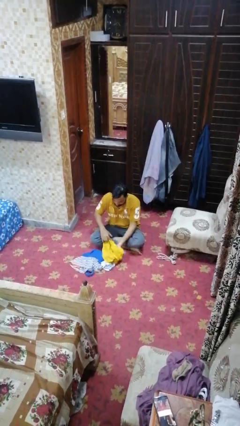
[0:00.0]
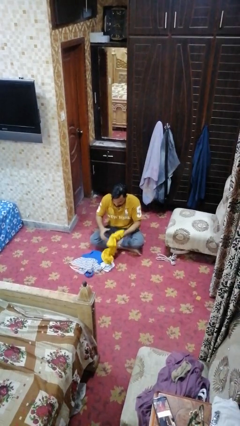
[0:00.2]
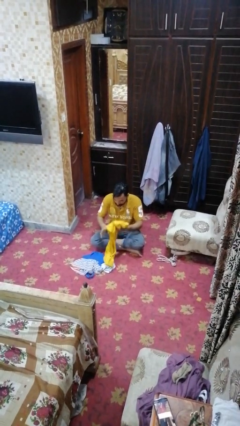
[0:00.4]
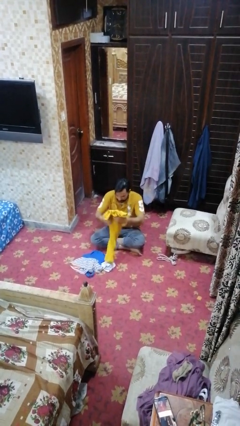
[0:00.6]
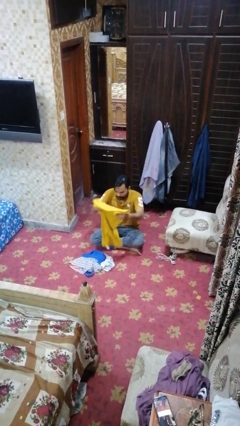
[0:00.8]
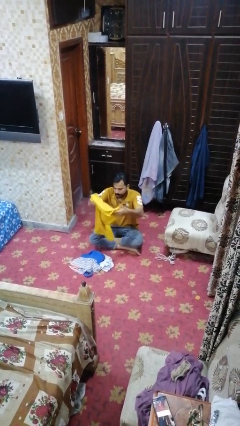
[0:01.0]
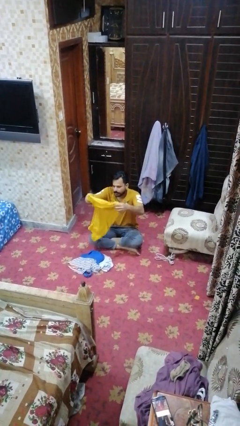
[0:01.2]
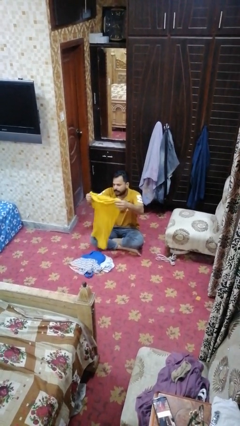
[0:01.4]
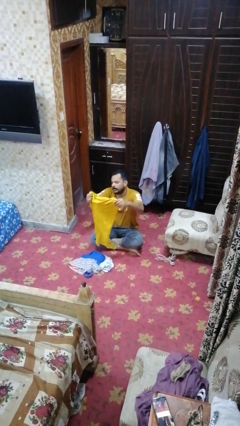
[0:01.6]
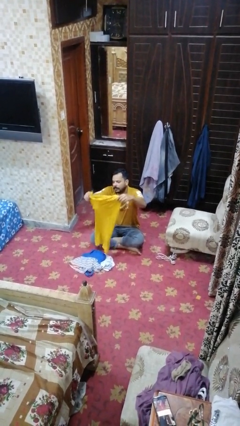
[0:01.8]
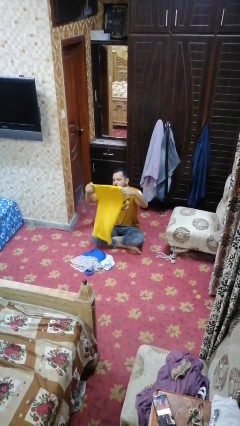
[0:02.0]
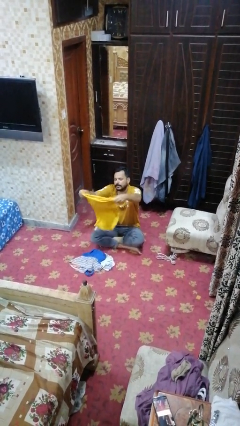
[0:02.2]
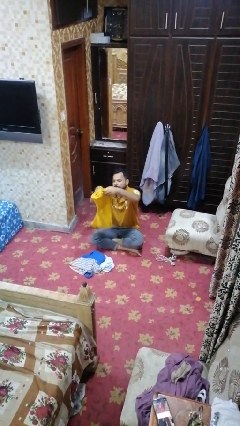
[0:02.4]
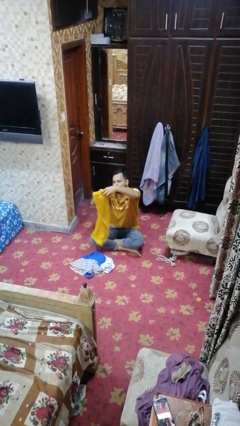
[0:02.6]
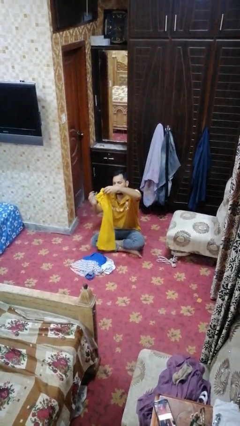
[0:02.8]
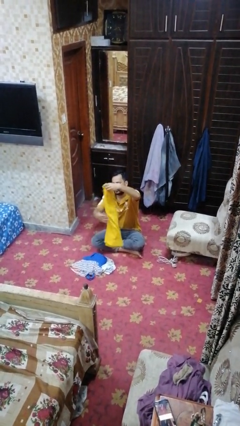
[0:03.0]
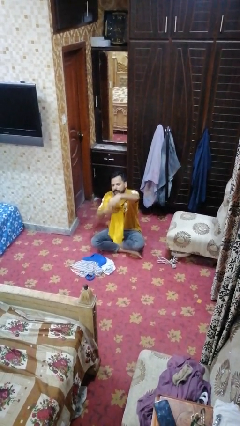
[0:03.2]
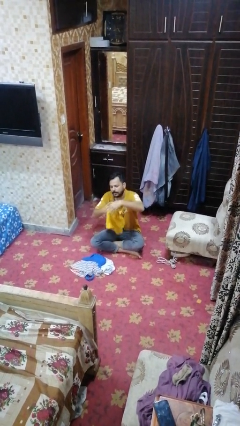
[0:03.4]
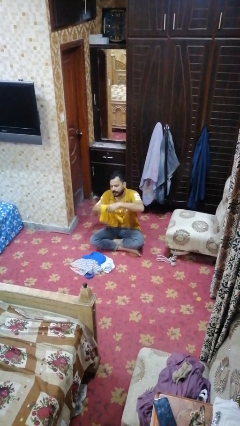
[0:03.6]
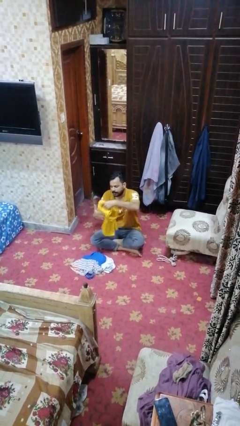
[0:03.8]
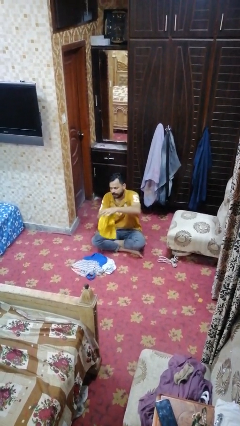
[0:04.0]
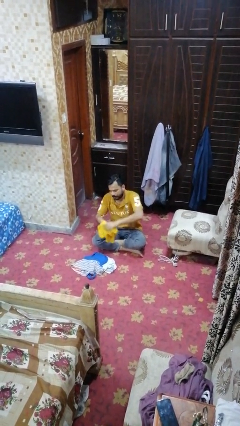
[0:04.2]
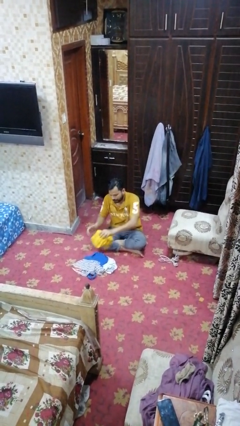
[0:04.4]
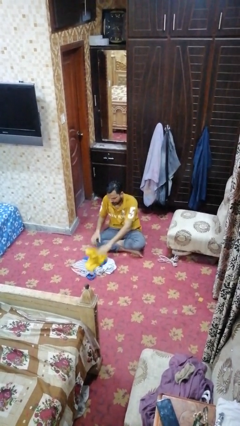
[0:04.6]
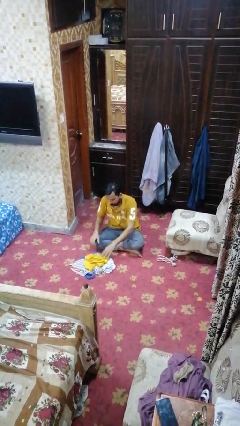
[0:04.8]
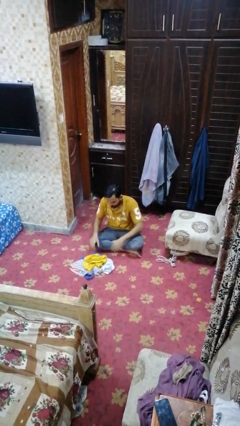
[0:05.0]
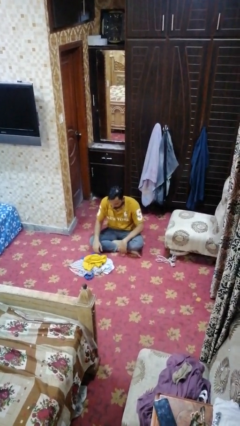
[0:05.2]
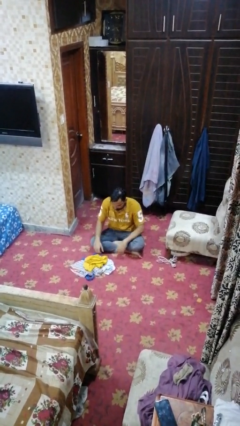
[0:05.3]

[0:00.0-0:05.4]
person folds shirt

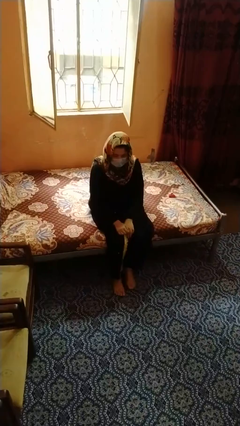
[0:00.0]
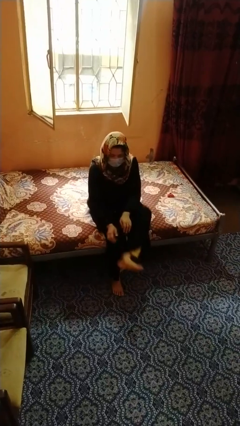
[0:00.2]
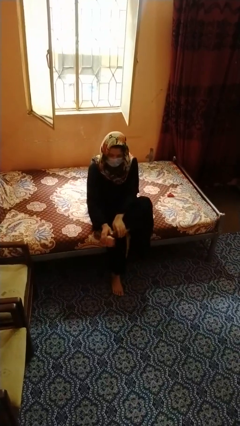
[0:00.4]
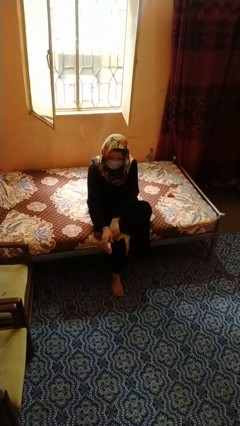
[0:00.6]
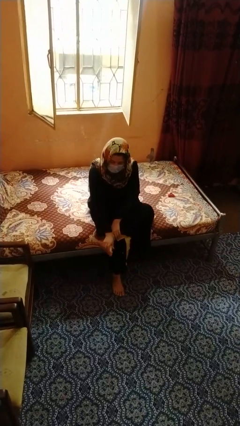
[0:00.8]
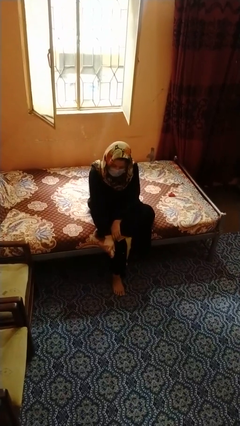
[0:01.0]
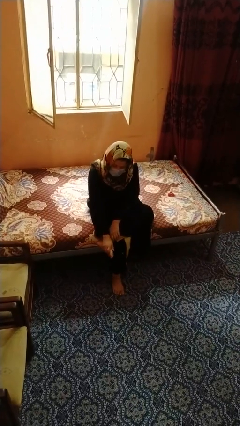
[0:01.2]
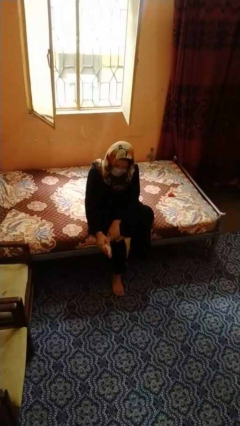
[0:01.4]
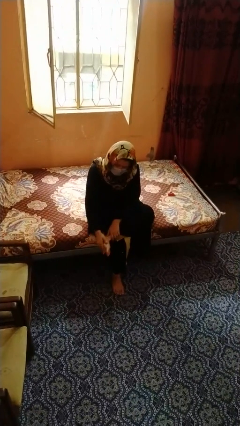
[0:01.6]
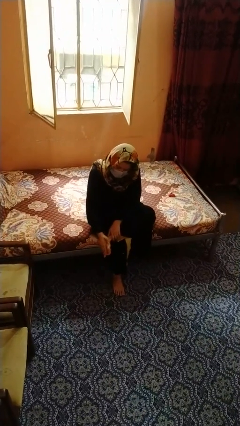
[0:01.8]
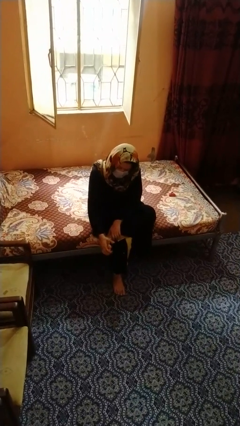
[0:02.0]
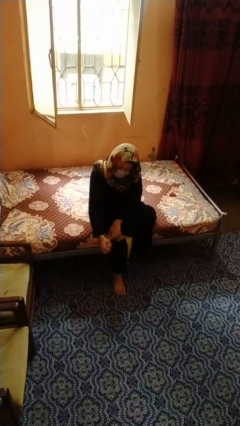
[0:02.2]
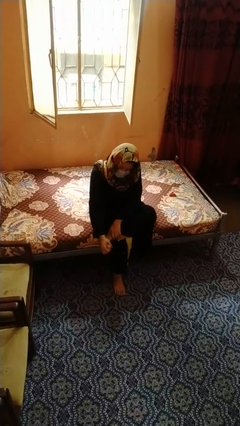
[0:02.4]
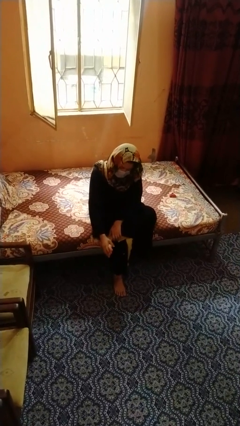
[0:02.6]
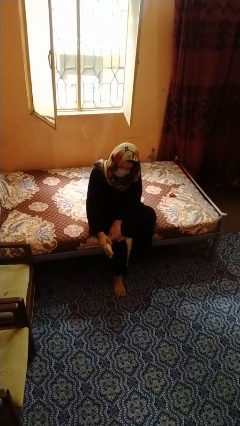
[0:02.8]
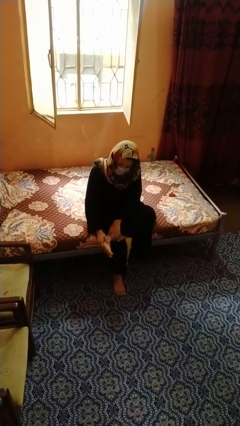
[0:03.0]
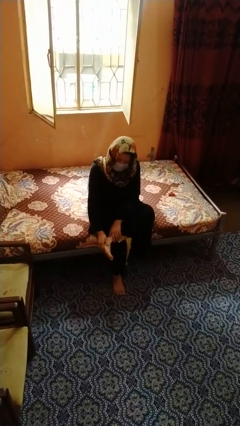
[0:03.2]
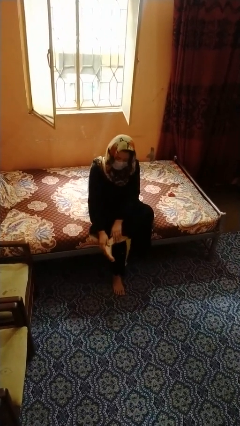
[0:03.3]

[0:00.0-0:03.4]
person rubs foot

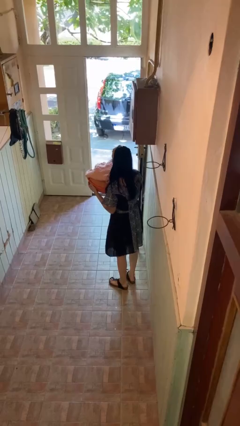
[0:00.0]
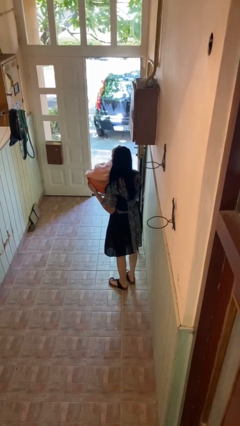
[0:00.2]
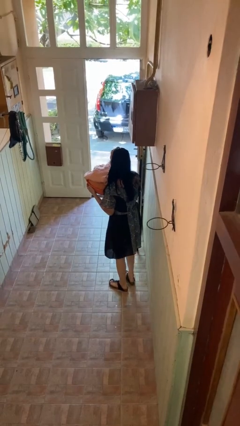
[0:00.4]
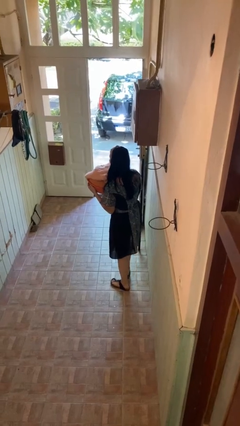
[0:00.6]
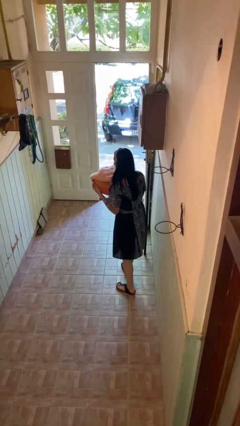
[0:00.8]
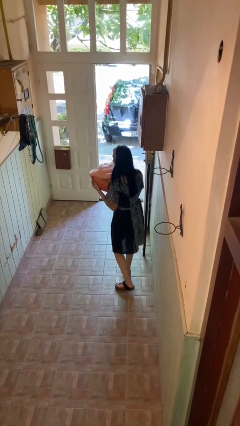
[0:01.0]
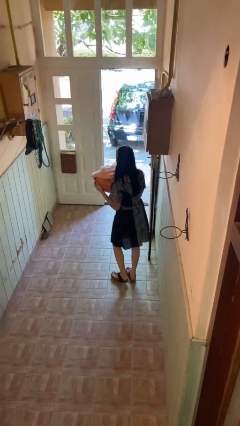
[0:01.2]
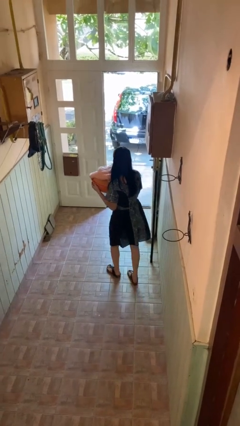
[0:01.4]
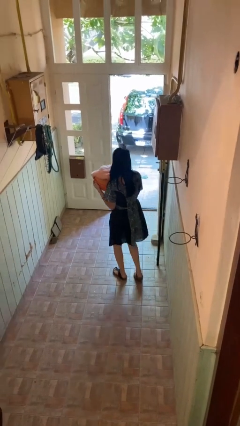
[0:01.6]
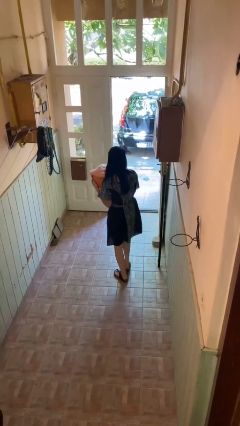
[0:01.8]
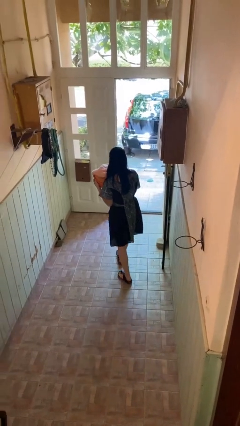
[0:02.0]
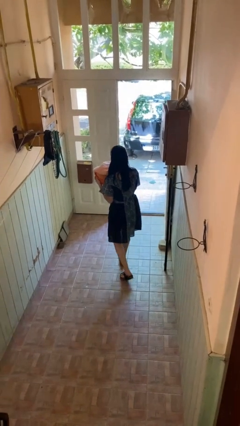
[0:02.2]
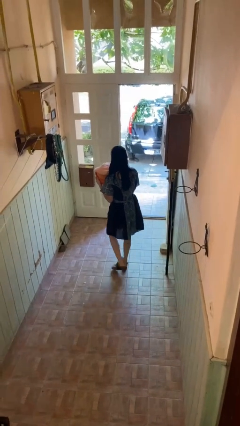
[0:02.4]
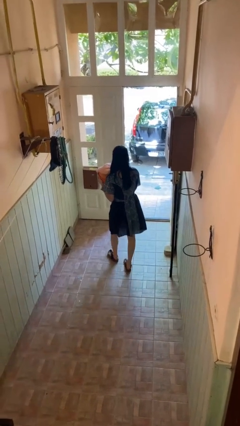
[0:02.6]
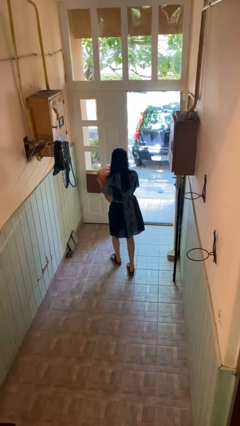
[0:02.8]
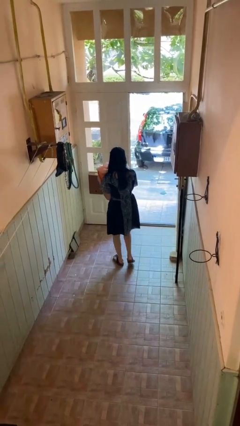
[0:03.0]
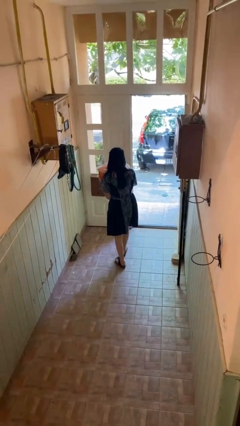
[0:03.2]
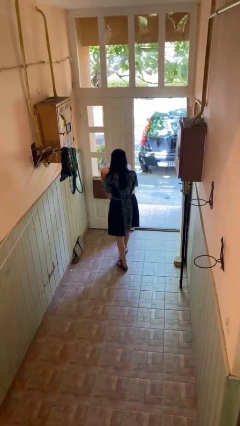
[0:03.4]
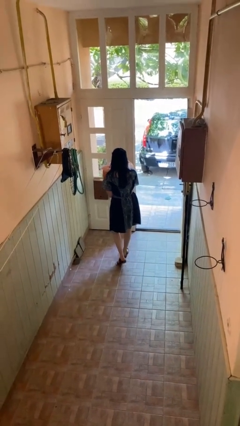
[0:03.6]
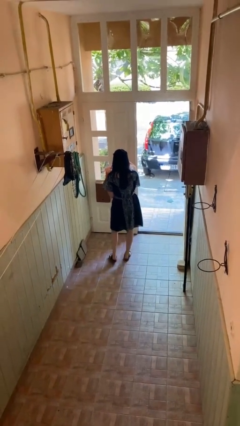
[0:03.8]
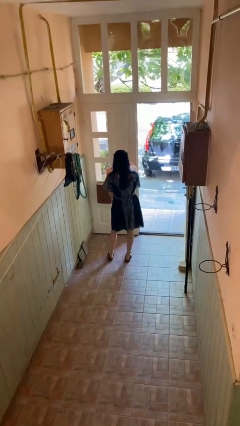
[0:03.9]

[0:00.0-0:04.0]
person carries laundry basket

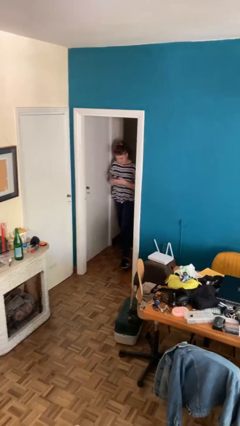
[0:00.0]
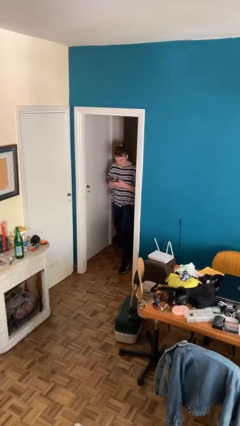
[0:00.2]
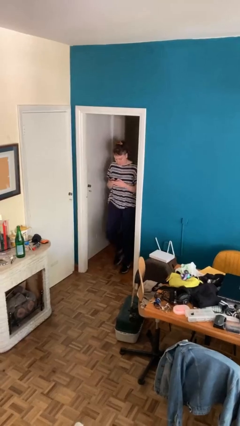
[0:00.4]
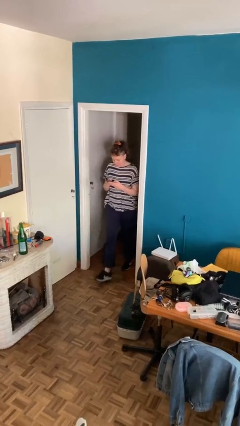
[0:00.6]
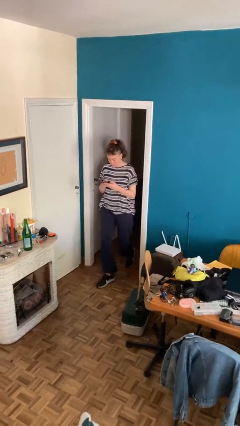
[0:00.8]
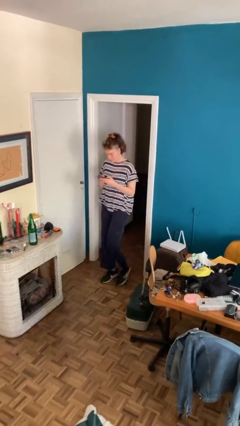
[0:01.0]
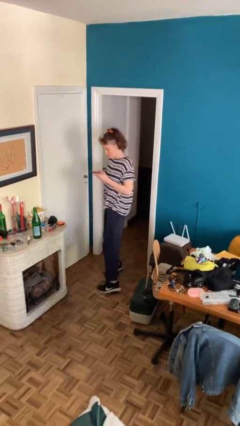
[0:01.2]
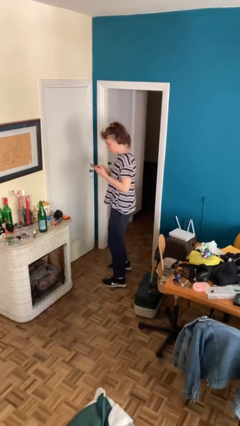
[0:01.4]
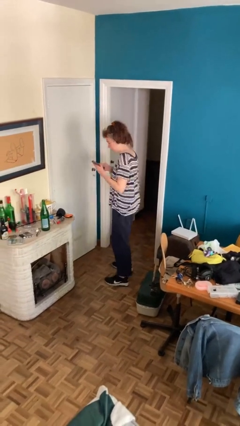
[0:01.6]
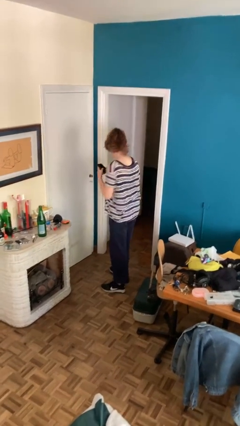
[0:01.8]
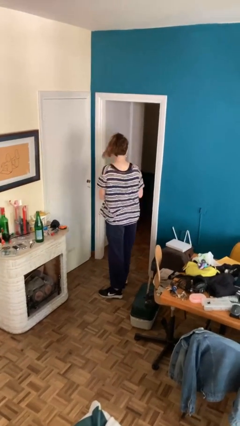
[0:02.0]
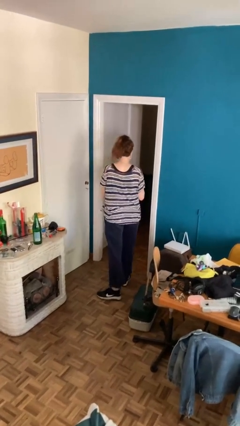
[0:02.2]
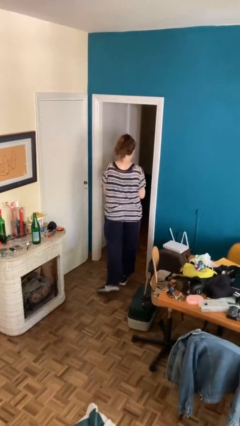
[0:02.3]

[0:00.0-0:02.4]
person exits scene through structure

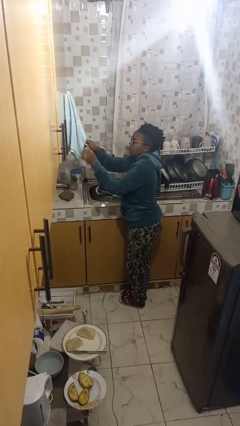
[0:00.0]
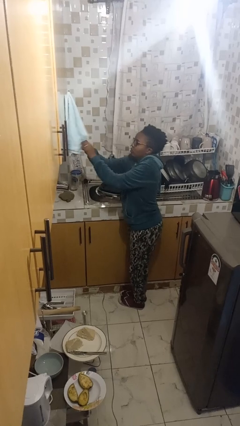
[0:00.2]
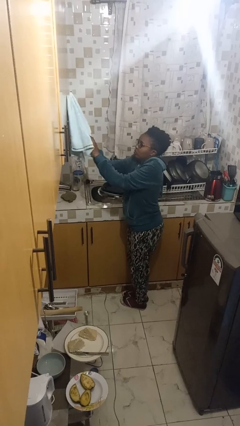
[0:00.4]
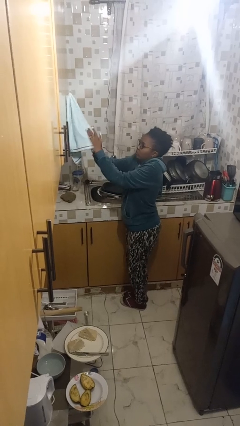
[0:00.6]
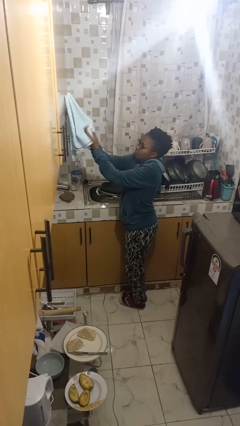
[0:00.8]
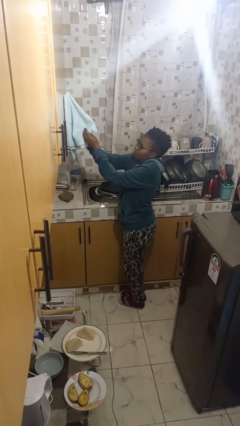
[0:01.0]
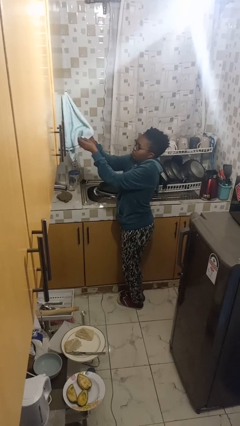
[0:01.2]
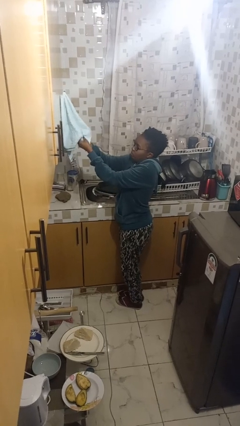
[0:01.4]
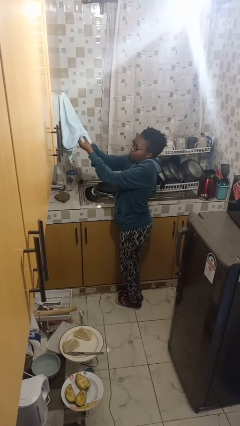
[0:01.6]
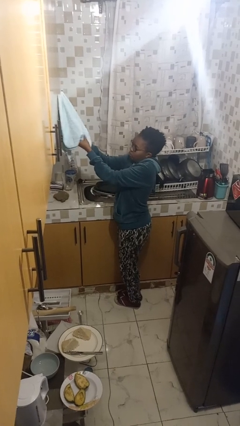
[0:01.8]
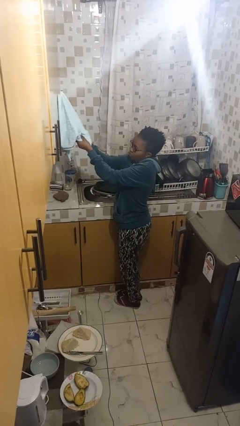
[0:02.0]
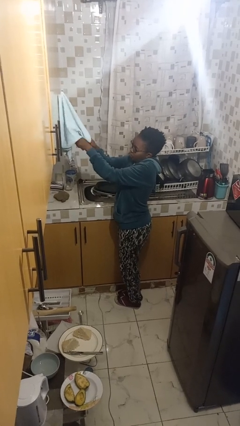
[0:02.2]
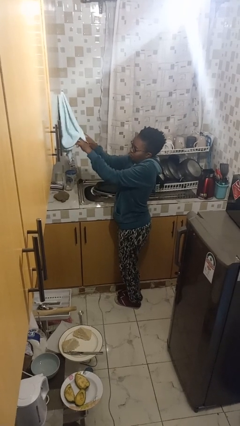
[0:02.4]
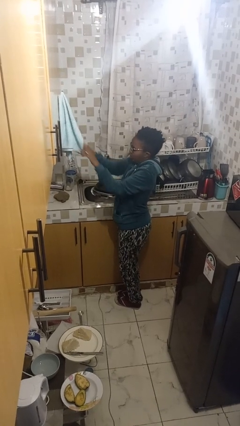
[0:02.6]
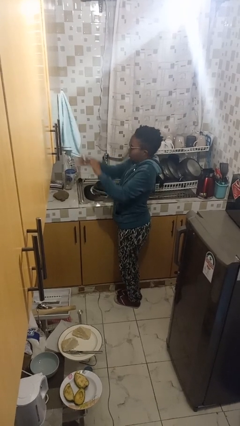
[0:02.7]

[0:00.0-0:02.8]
person dries hands with towel
